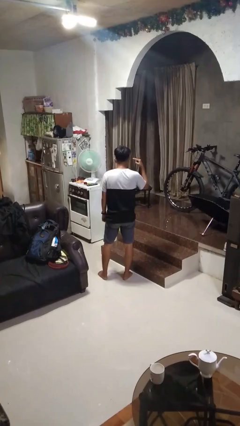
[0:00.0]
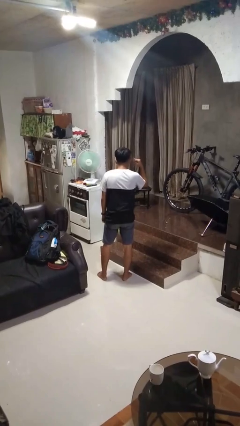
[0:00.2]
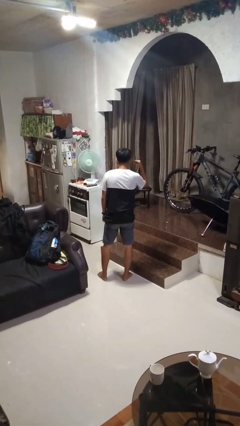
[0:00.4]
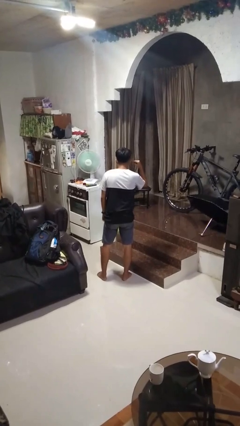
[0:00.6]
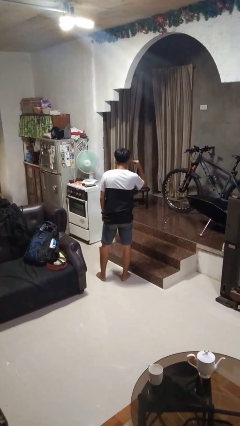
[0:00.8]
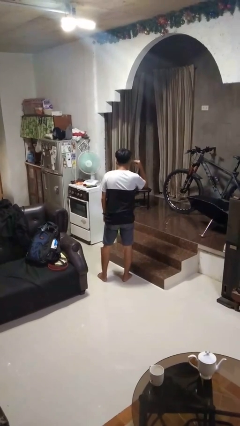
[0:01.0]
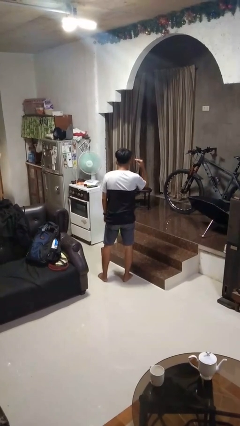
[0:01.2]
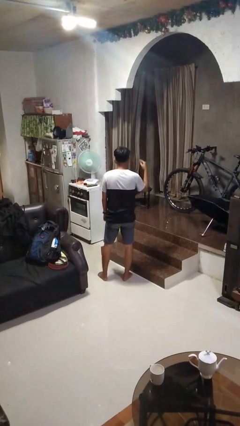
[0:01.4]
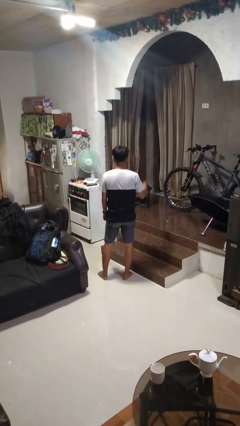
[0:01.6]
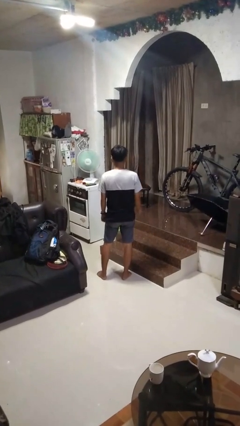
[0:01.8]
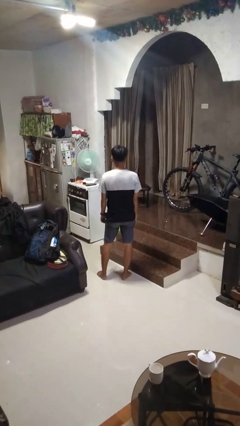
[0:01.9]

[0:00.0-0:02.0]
person gestures listen closely

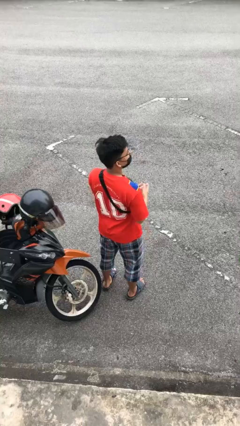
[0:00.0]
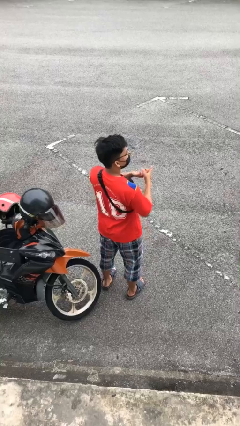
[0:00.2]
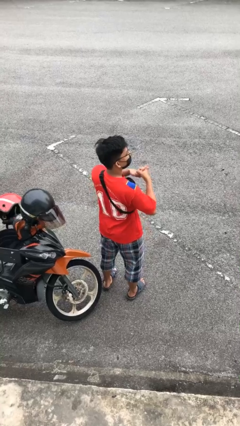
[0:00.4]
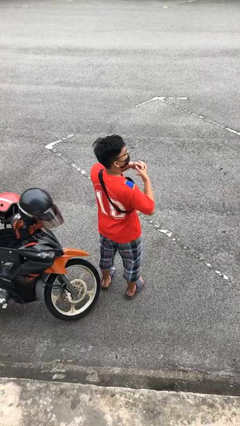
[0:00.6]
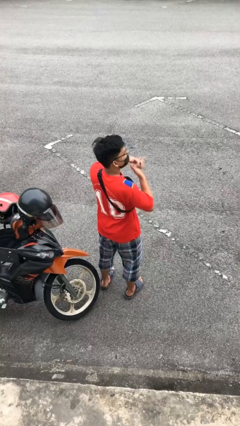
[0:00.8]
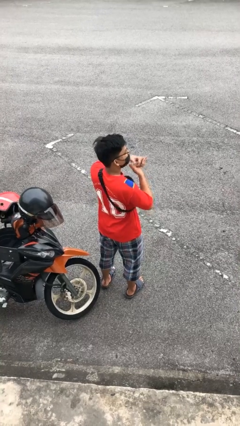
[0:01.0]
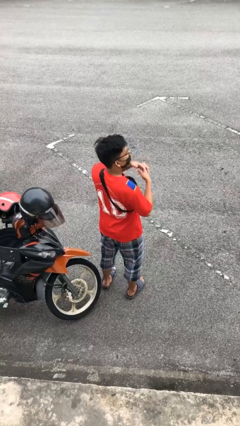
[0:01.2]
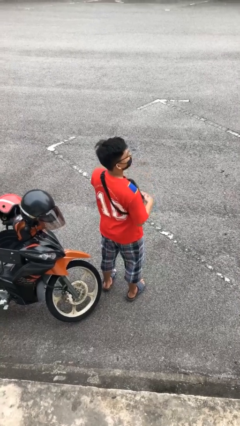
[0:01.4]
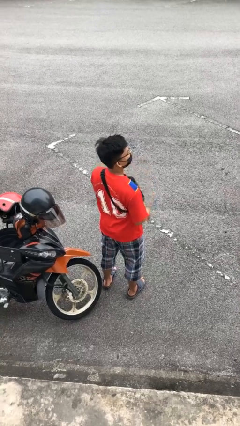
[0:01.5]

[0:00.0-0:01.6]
person cracks knuckles

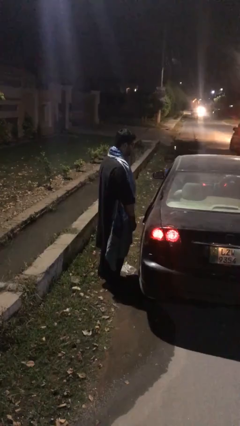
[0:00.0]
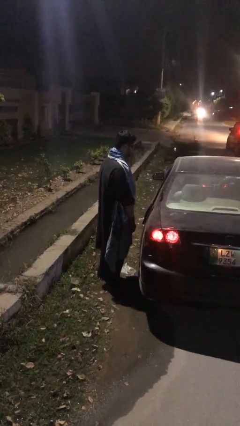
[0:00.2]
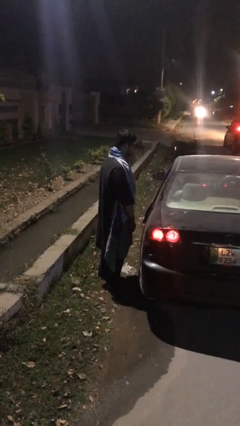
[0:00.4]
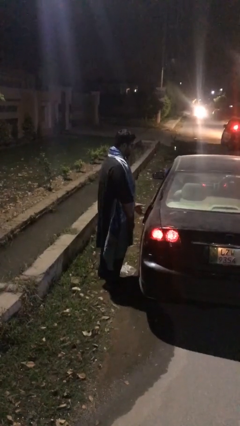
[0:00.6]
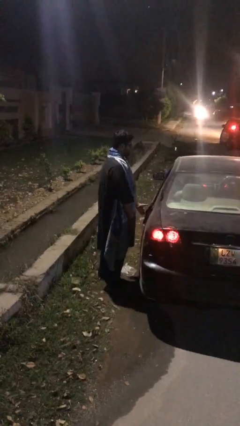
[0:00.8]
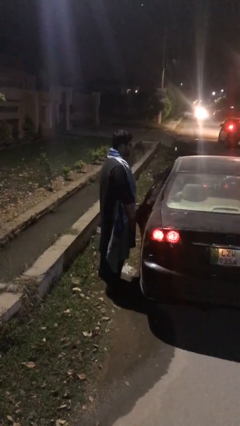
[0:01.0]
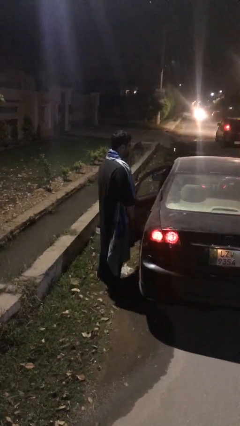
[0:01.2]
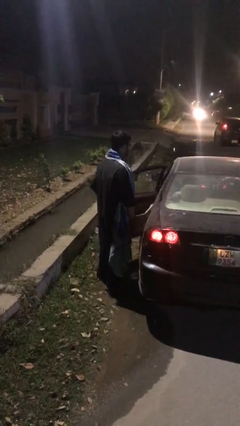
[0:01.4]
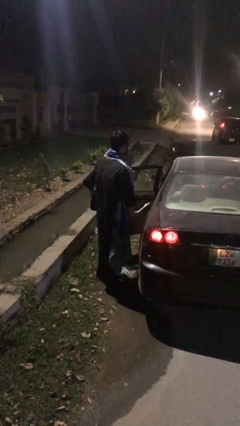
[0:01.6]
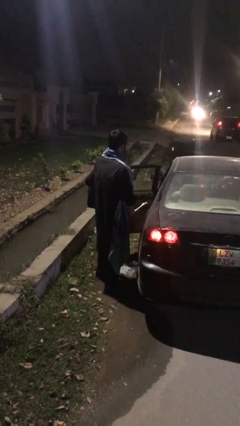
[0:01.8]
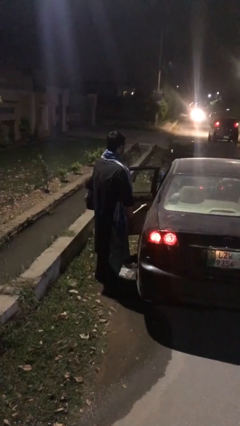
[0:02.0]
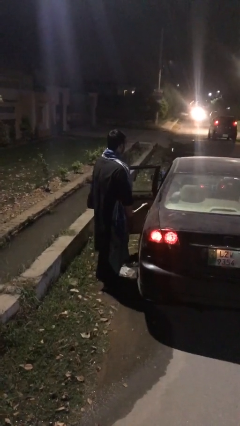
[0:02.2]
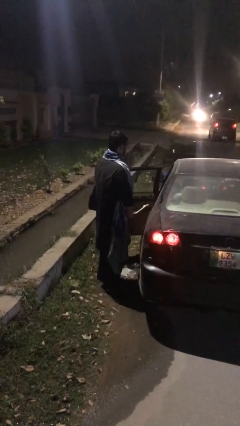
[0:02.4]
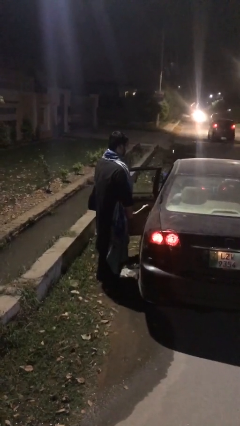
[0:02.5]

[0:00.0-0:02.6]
person opens car door

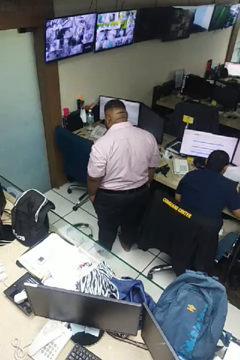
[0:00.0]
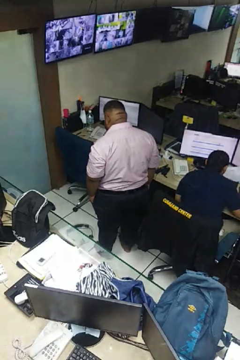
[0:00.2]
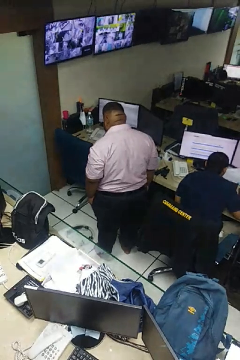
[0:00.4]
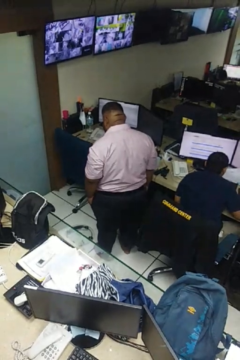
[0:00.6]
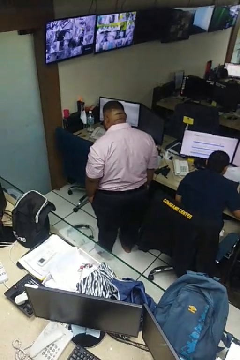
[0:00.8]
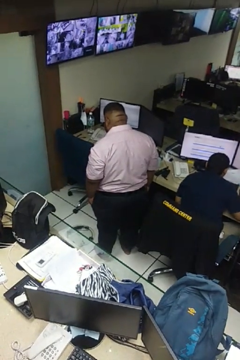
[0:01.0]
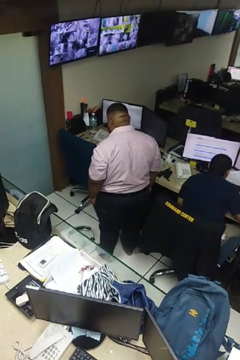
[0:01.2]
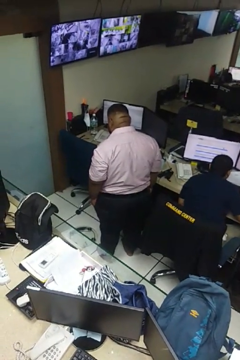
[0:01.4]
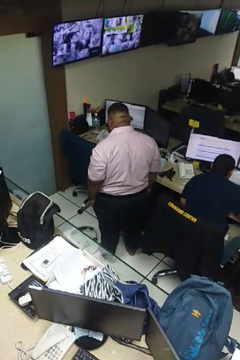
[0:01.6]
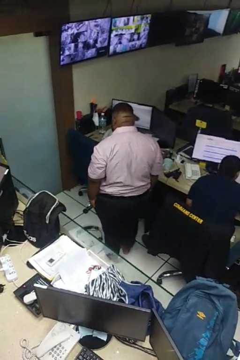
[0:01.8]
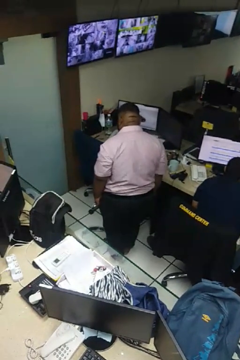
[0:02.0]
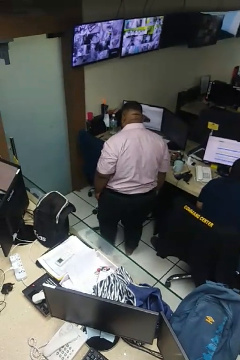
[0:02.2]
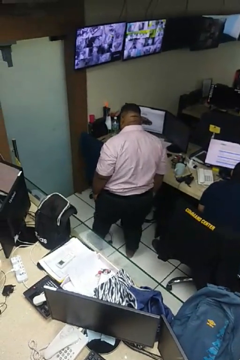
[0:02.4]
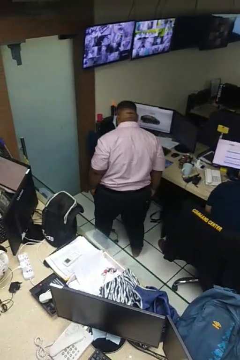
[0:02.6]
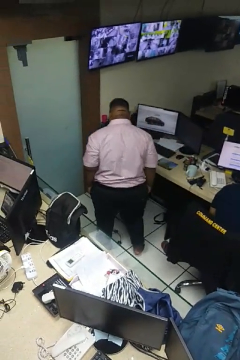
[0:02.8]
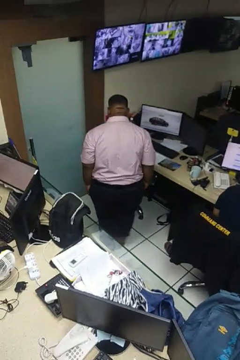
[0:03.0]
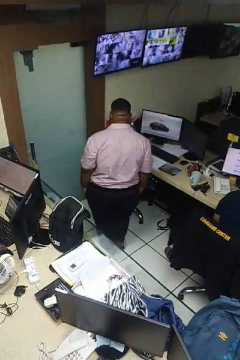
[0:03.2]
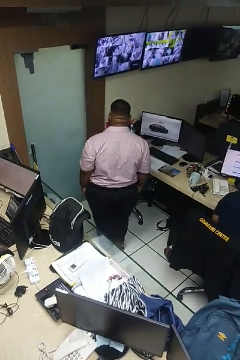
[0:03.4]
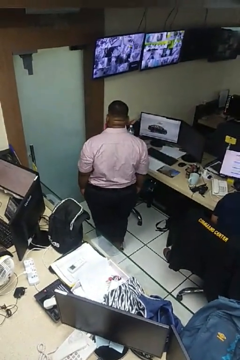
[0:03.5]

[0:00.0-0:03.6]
person uses bodyweight scale

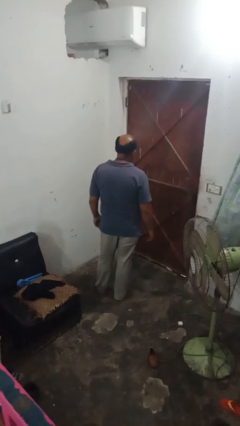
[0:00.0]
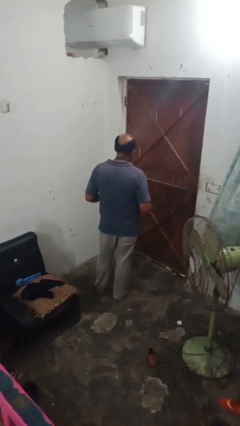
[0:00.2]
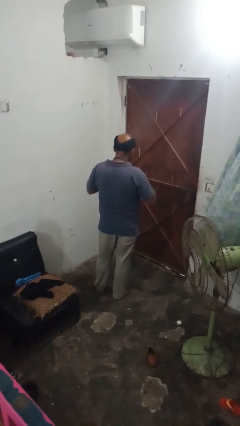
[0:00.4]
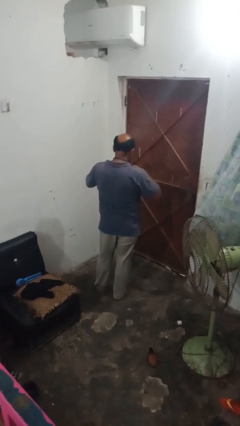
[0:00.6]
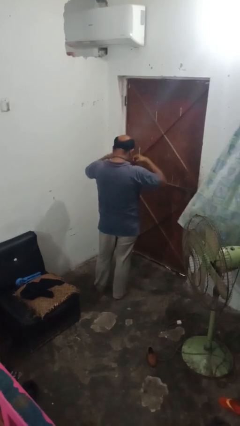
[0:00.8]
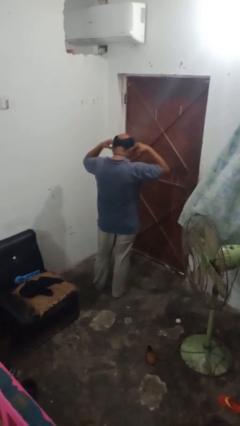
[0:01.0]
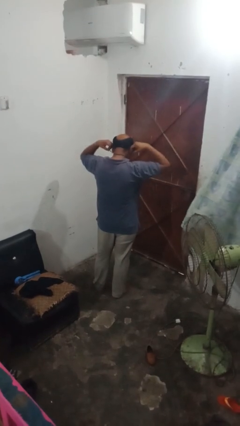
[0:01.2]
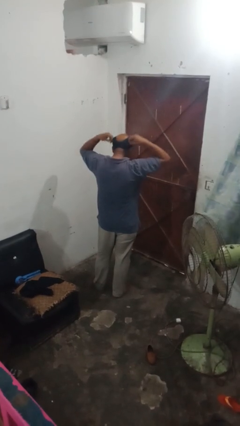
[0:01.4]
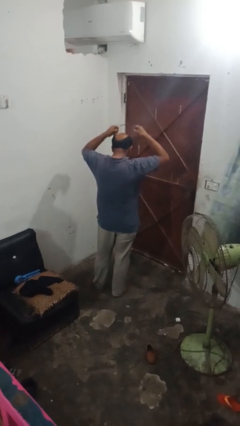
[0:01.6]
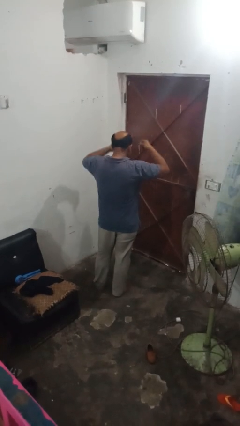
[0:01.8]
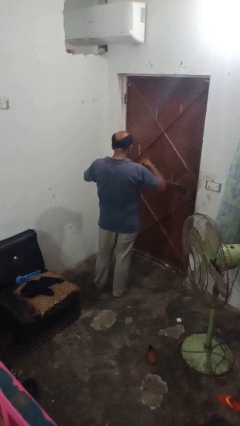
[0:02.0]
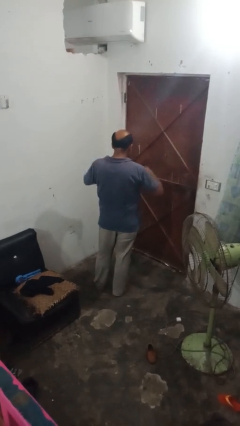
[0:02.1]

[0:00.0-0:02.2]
person takes off necklace

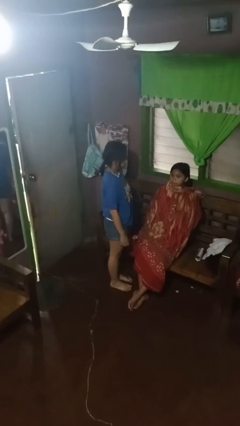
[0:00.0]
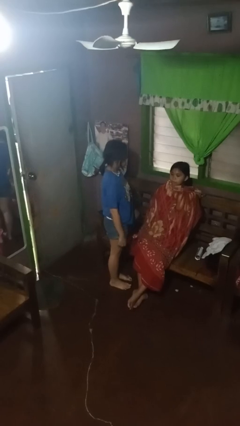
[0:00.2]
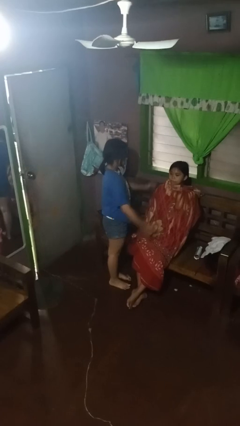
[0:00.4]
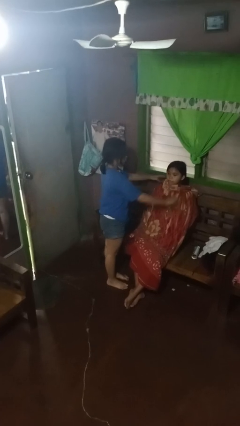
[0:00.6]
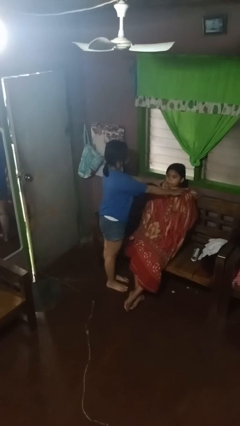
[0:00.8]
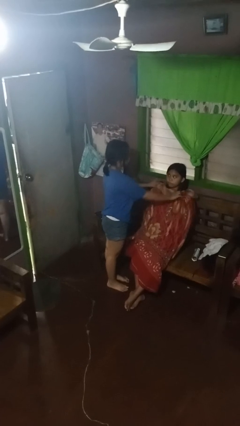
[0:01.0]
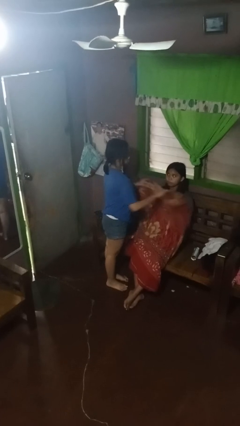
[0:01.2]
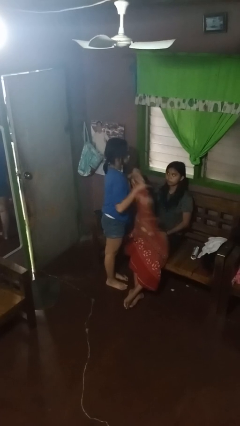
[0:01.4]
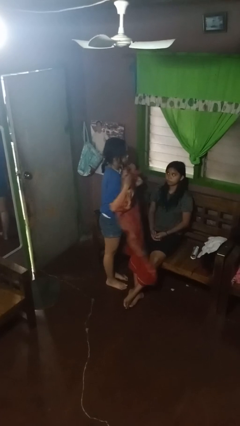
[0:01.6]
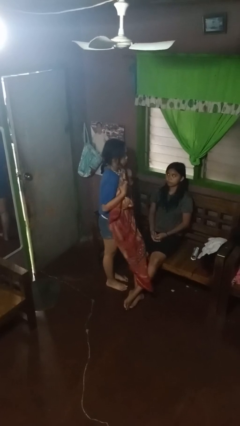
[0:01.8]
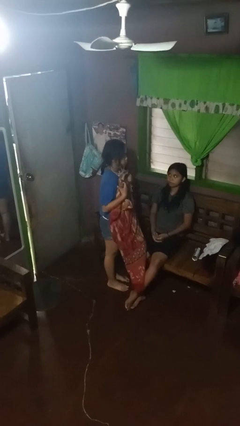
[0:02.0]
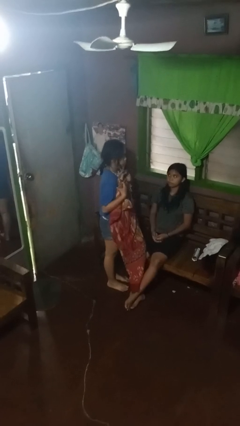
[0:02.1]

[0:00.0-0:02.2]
person uncovers friend with blanket

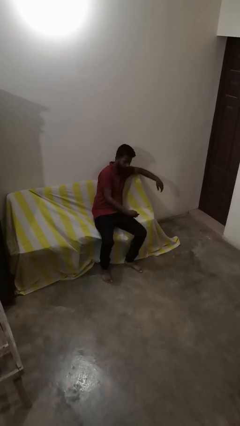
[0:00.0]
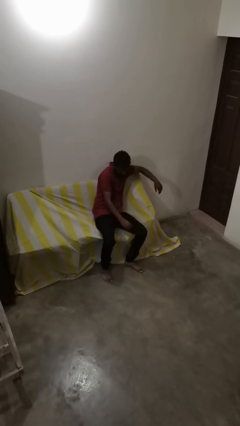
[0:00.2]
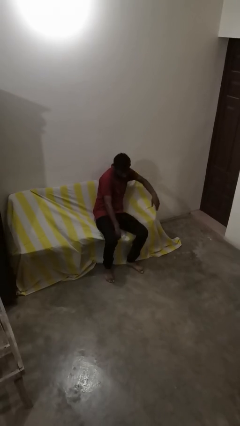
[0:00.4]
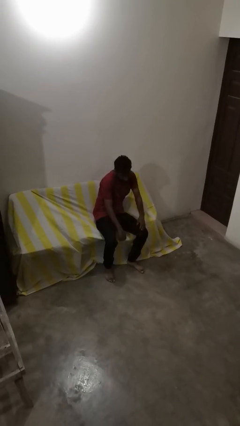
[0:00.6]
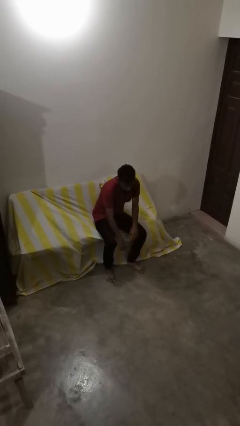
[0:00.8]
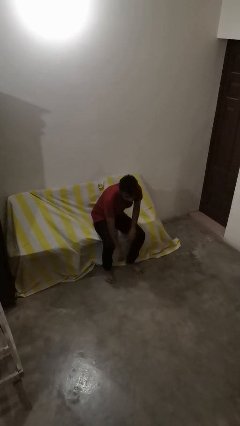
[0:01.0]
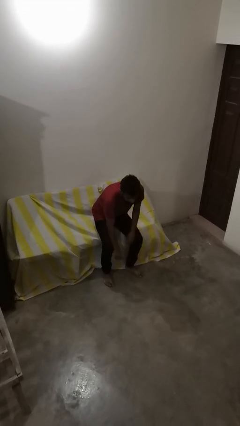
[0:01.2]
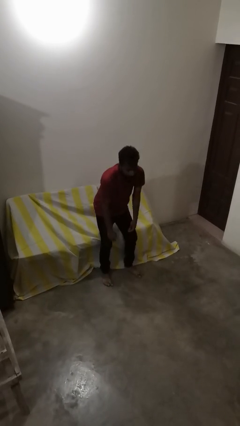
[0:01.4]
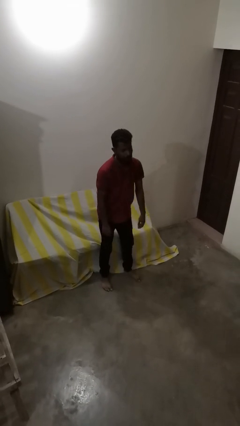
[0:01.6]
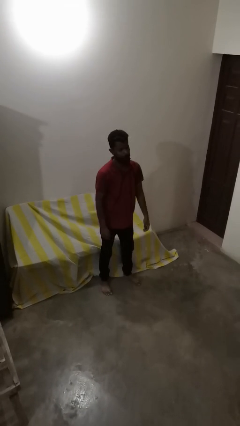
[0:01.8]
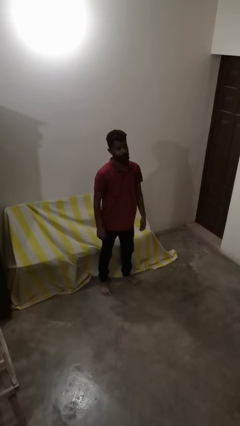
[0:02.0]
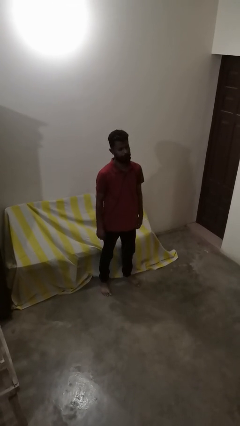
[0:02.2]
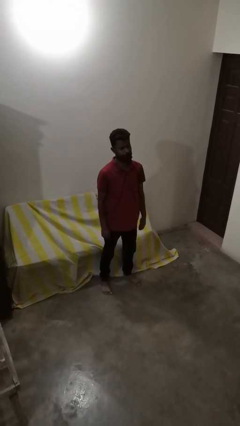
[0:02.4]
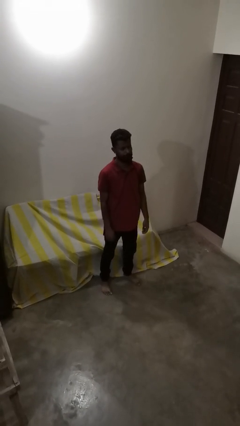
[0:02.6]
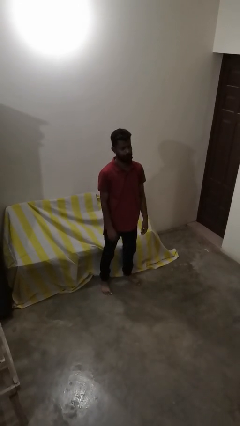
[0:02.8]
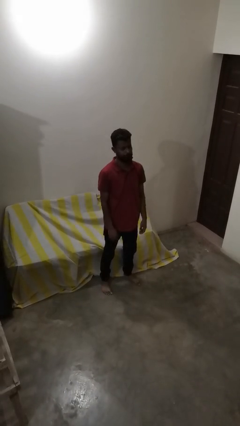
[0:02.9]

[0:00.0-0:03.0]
person stands up

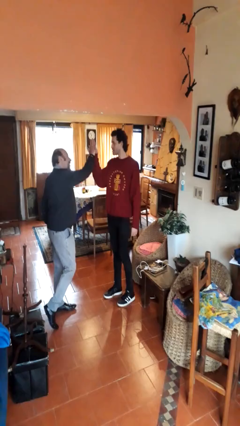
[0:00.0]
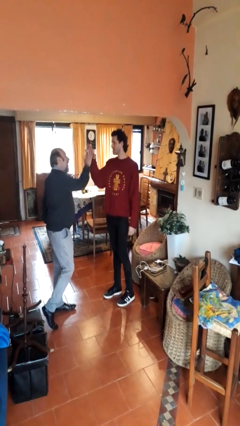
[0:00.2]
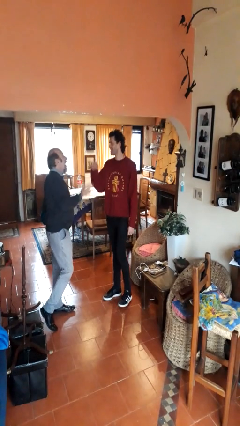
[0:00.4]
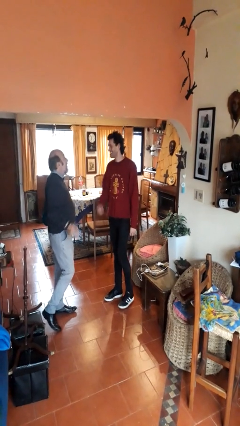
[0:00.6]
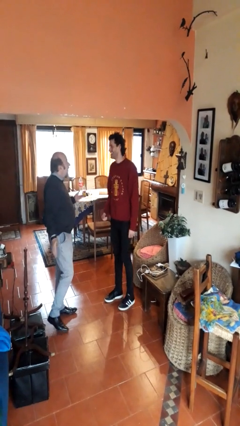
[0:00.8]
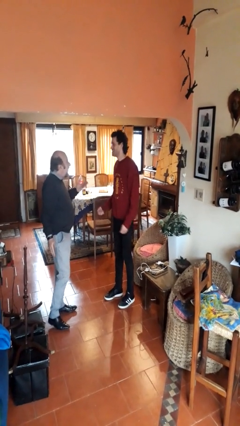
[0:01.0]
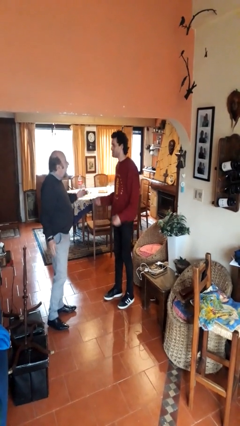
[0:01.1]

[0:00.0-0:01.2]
person highfives hand
